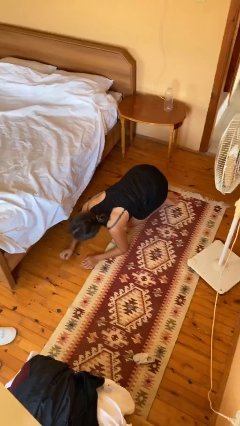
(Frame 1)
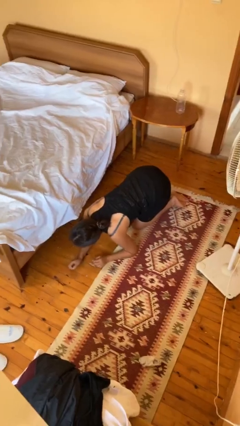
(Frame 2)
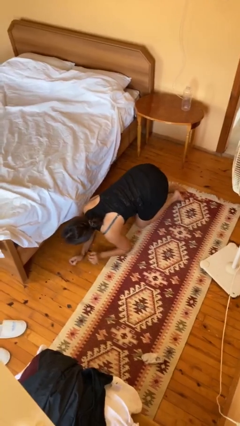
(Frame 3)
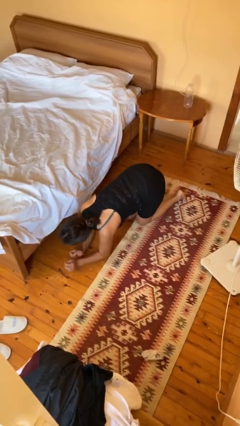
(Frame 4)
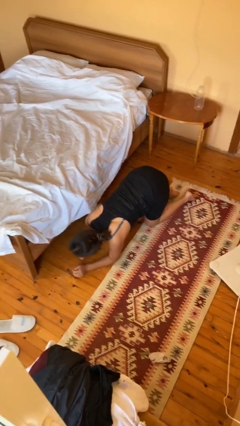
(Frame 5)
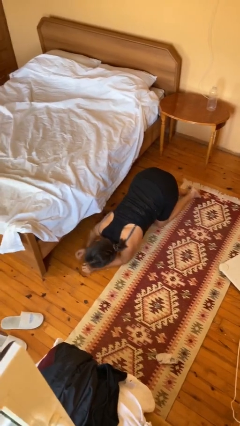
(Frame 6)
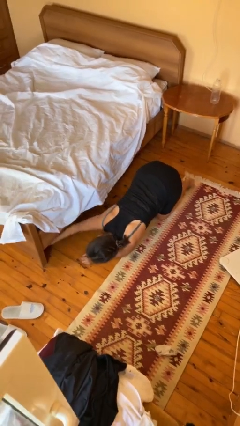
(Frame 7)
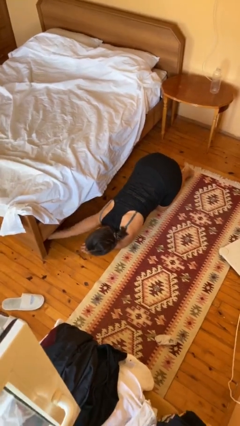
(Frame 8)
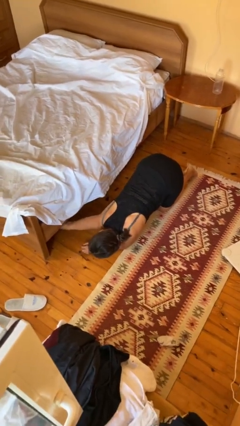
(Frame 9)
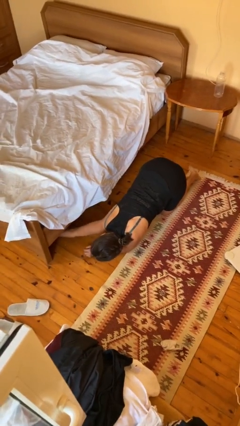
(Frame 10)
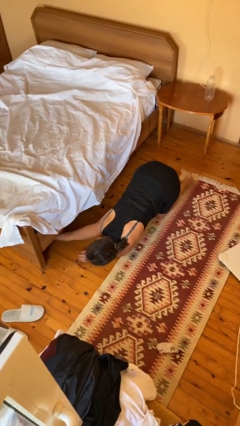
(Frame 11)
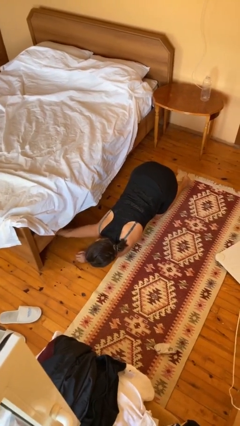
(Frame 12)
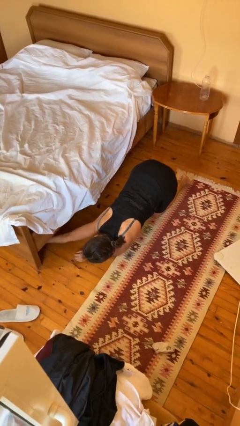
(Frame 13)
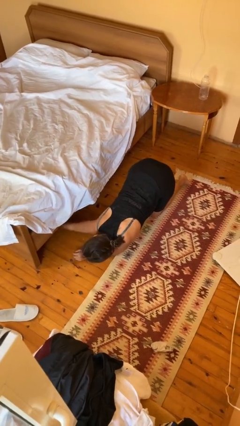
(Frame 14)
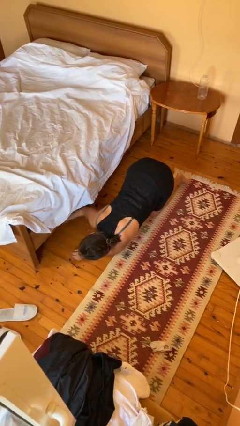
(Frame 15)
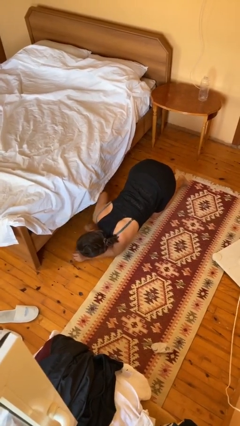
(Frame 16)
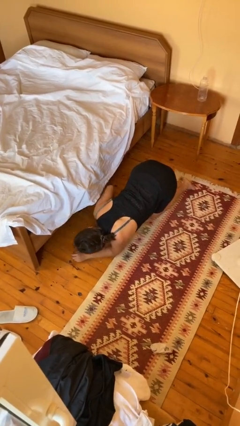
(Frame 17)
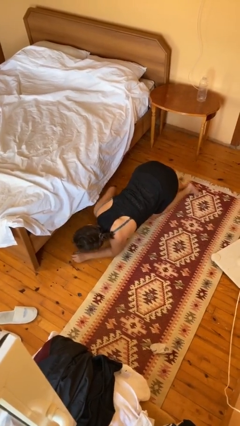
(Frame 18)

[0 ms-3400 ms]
person searches under bed

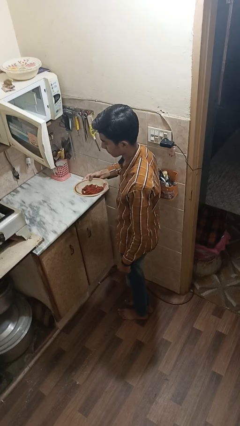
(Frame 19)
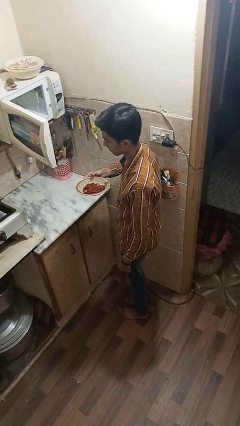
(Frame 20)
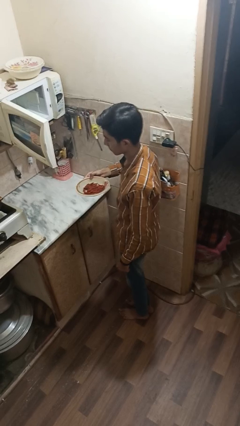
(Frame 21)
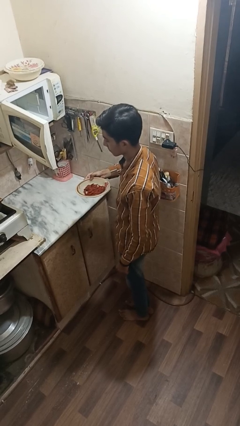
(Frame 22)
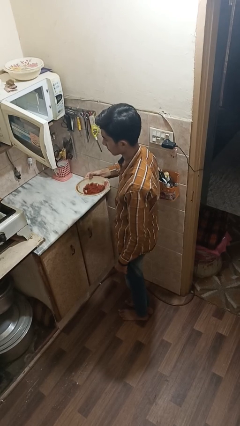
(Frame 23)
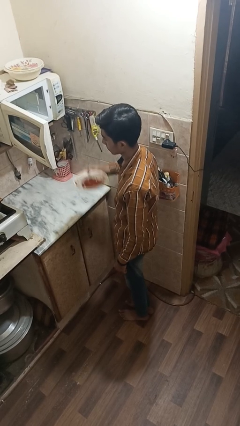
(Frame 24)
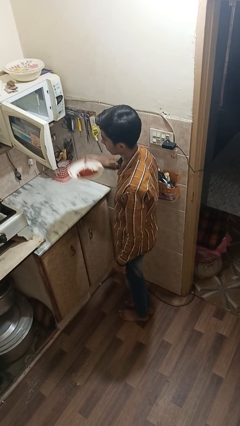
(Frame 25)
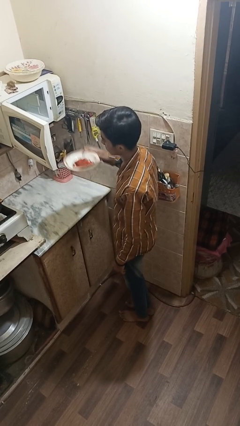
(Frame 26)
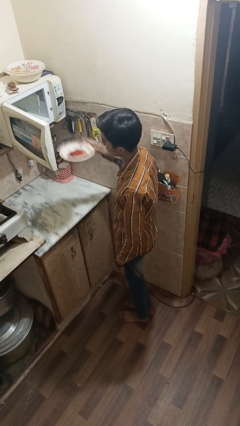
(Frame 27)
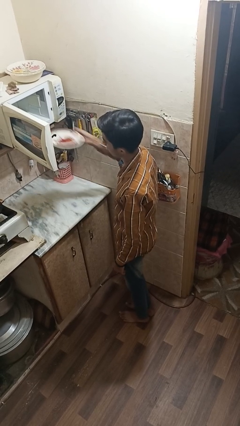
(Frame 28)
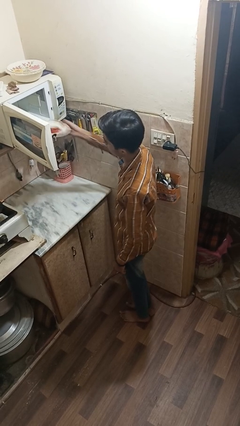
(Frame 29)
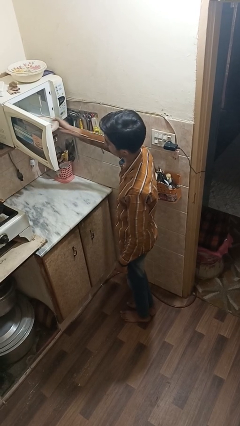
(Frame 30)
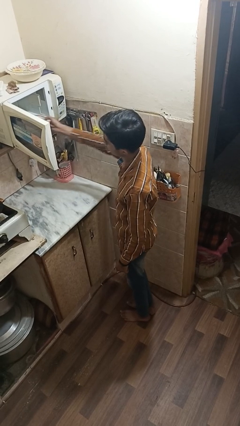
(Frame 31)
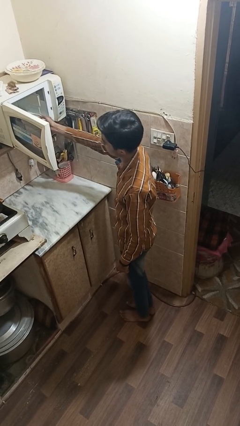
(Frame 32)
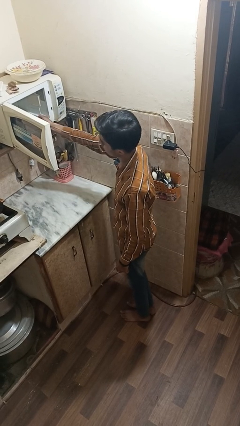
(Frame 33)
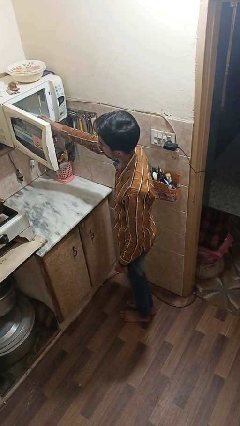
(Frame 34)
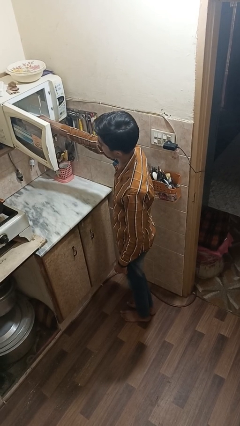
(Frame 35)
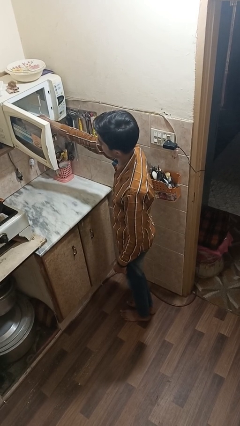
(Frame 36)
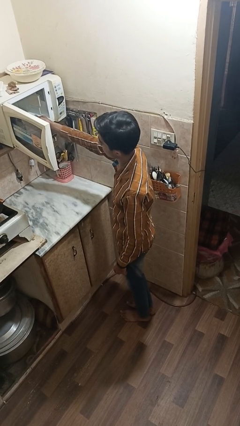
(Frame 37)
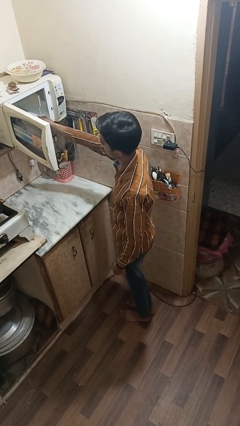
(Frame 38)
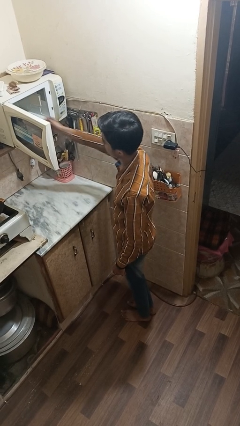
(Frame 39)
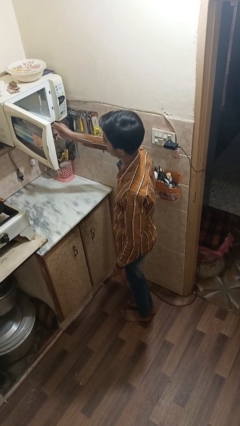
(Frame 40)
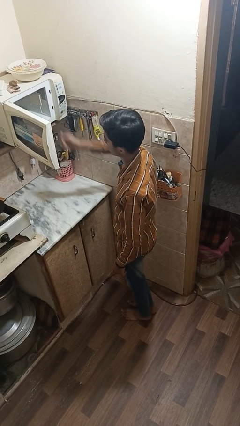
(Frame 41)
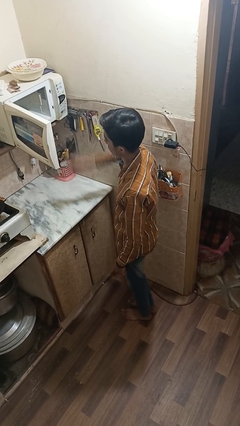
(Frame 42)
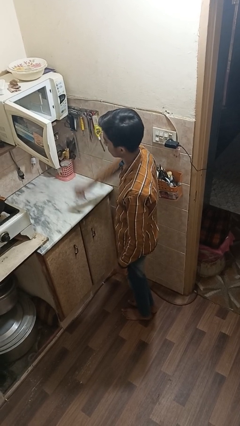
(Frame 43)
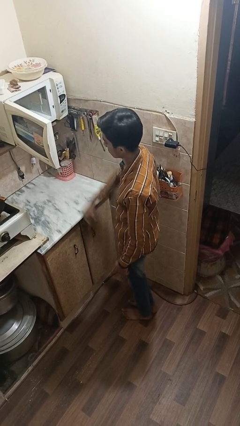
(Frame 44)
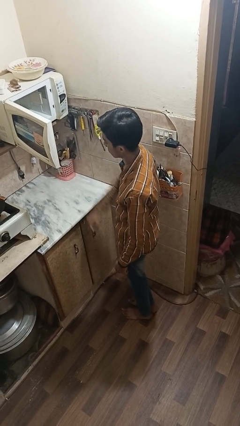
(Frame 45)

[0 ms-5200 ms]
person puts object into microwave

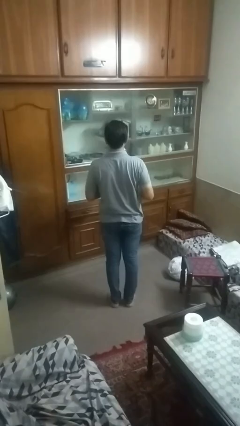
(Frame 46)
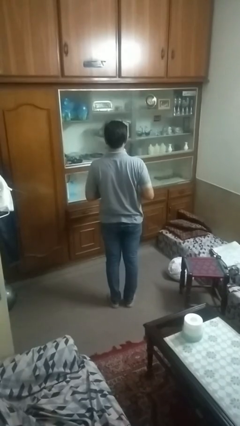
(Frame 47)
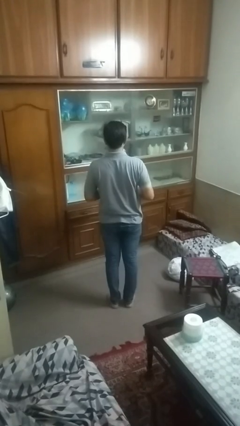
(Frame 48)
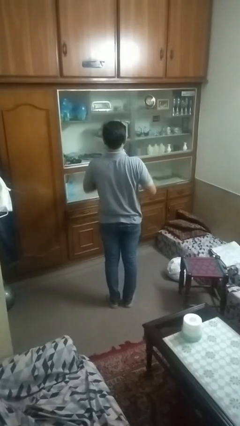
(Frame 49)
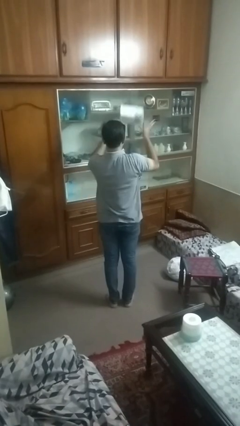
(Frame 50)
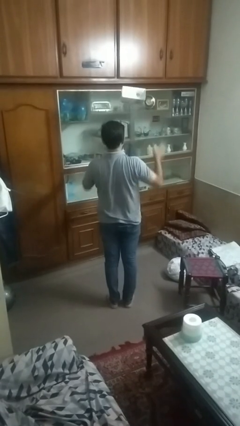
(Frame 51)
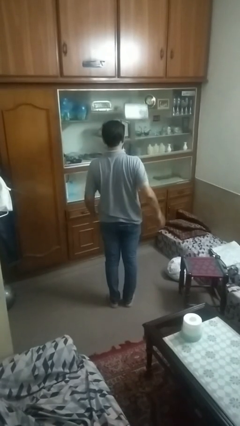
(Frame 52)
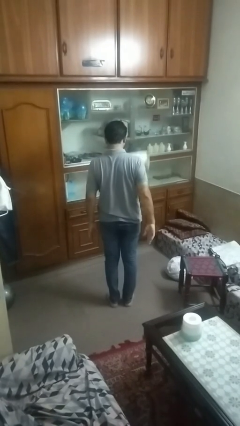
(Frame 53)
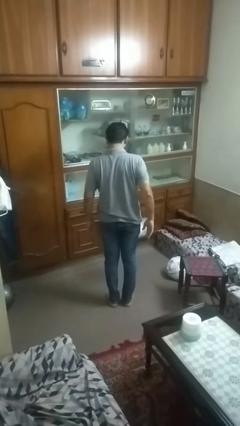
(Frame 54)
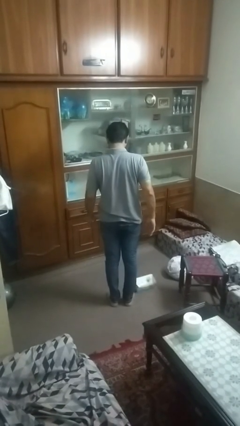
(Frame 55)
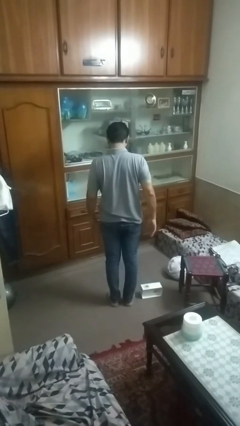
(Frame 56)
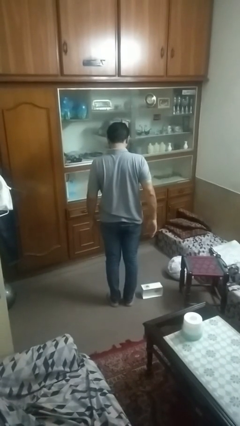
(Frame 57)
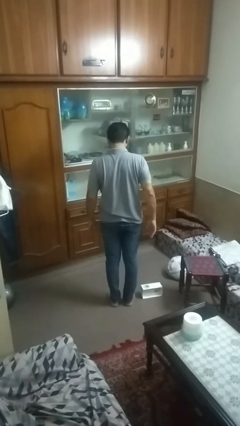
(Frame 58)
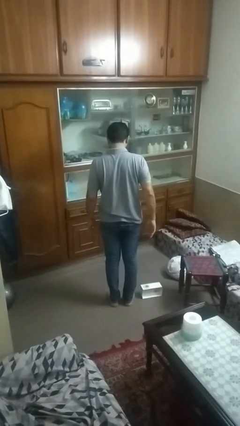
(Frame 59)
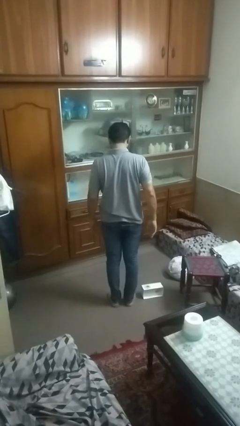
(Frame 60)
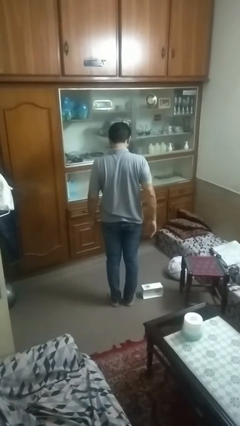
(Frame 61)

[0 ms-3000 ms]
person throws object into air

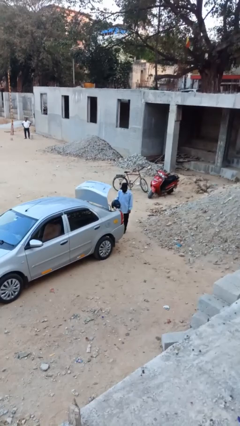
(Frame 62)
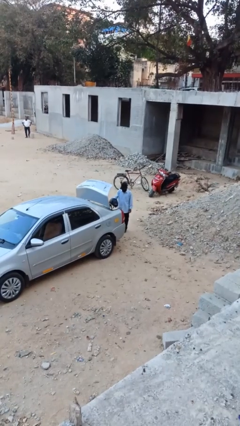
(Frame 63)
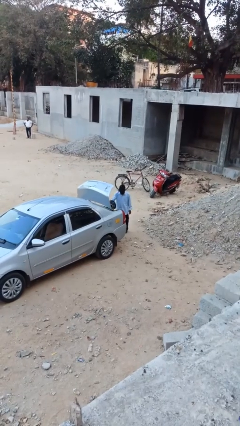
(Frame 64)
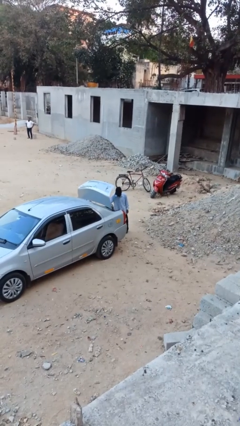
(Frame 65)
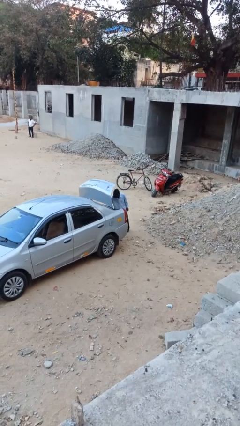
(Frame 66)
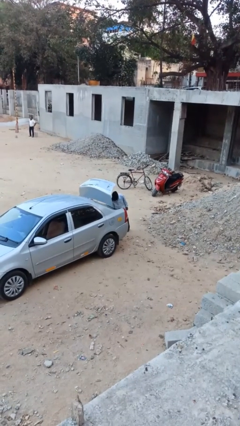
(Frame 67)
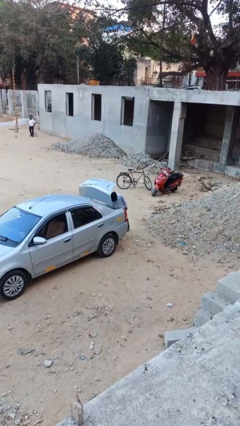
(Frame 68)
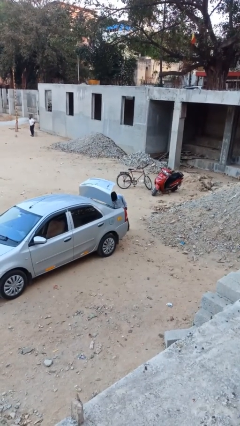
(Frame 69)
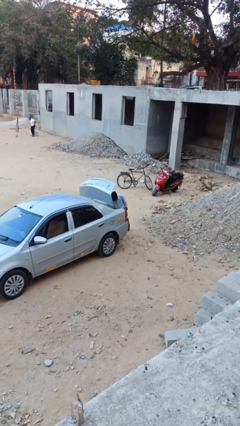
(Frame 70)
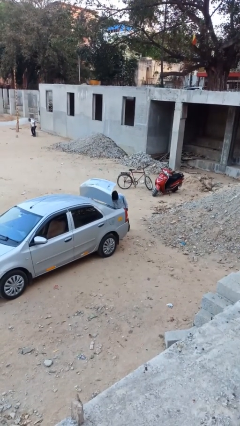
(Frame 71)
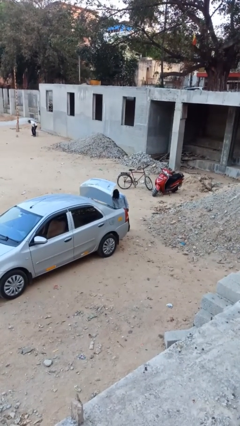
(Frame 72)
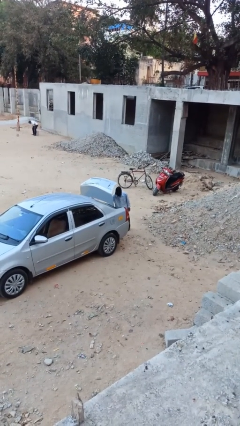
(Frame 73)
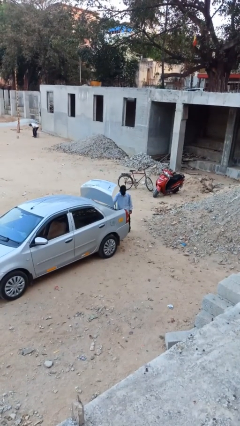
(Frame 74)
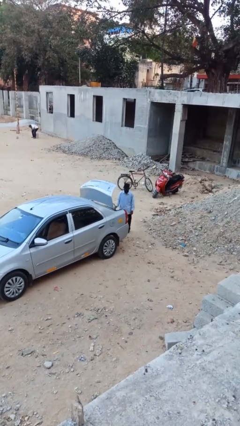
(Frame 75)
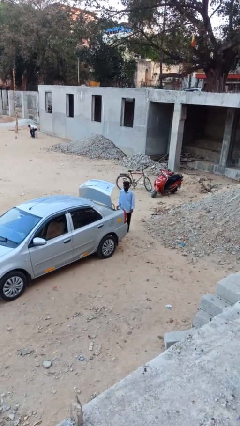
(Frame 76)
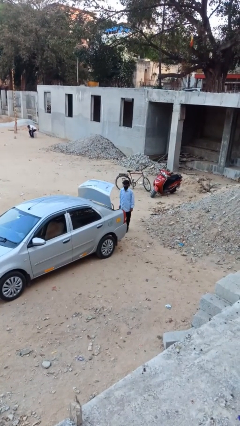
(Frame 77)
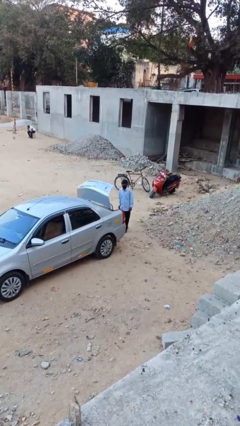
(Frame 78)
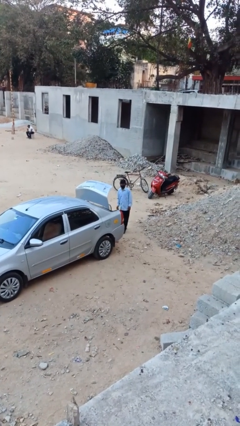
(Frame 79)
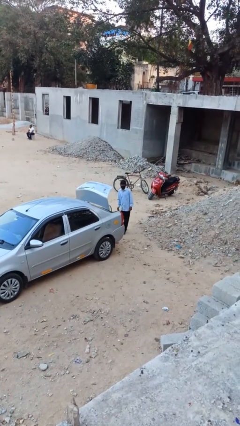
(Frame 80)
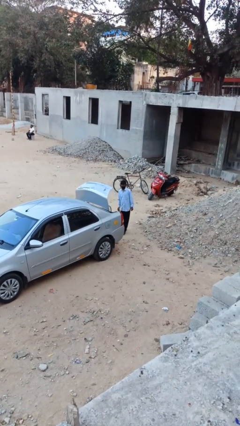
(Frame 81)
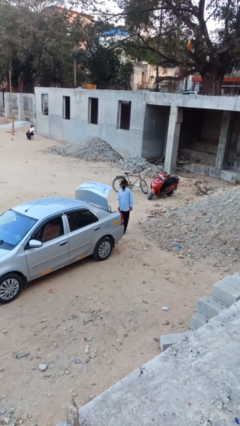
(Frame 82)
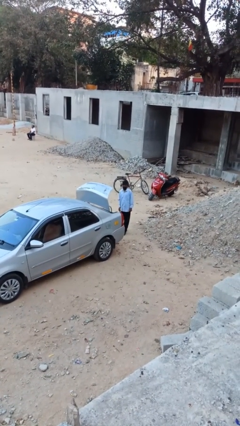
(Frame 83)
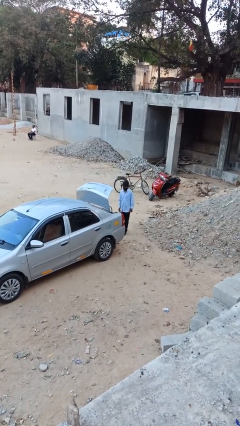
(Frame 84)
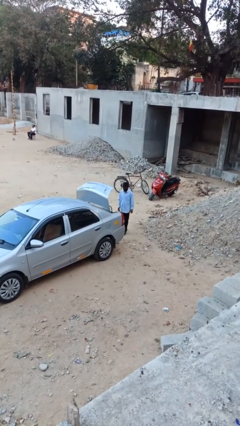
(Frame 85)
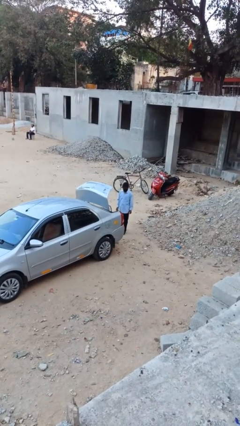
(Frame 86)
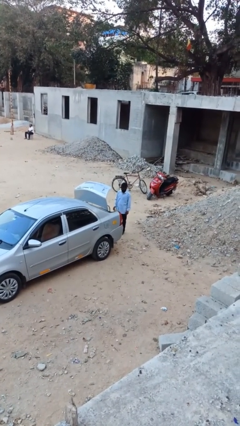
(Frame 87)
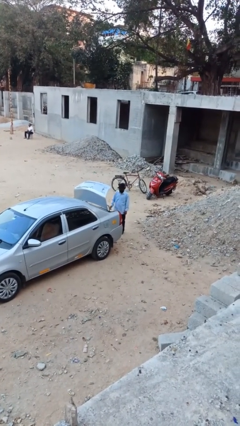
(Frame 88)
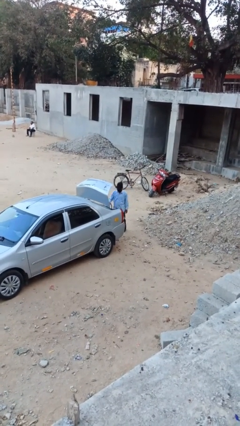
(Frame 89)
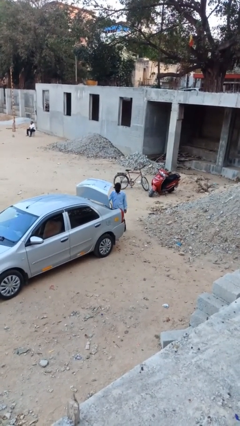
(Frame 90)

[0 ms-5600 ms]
person loads car

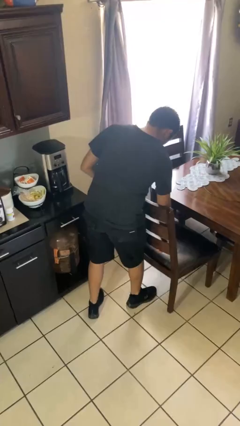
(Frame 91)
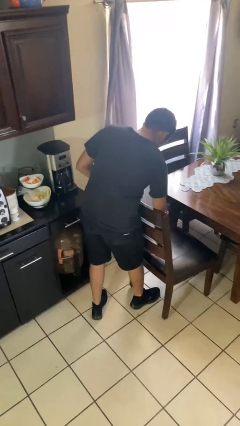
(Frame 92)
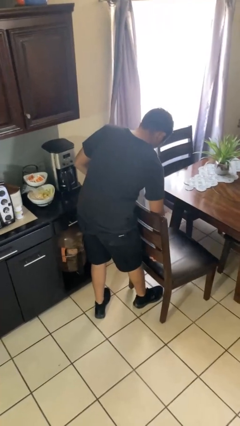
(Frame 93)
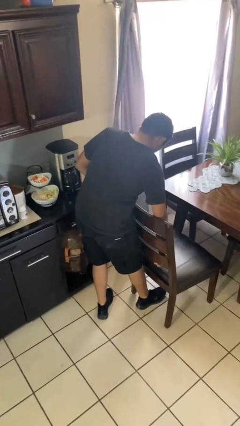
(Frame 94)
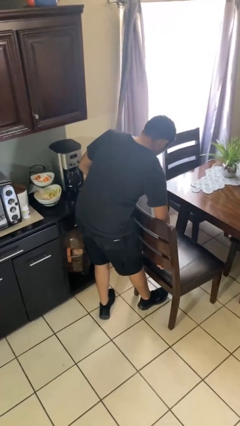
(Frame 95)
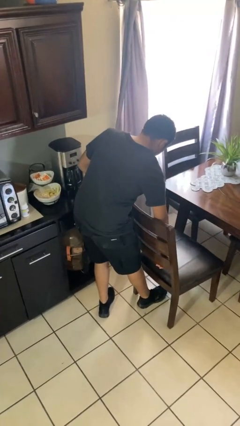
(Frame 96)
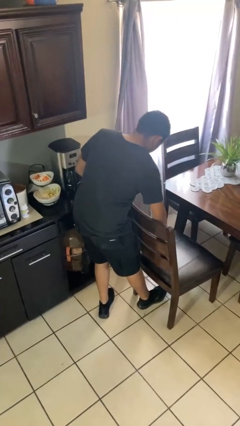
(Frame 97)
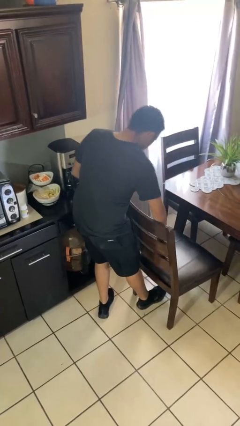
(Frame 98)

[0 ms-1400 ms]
person pulls out chair
